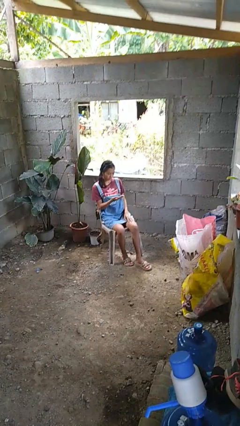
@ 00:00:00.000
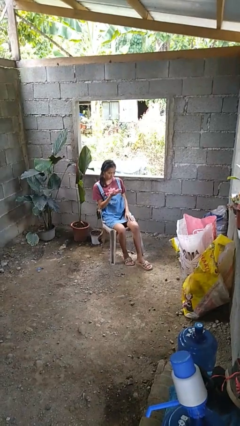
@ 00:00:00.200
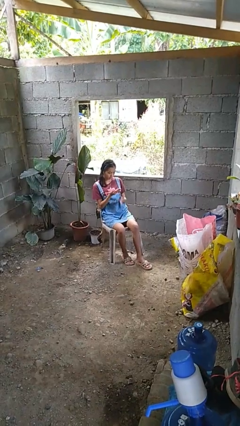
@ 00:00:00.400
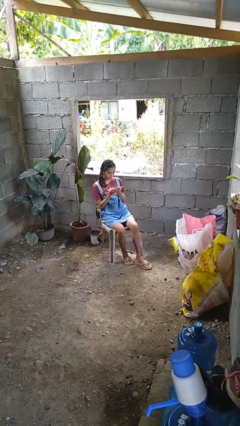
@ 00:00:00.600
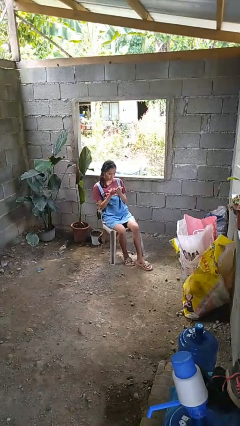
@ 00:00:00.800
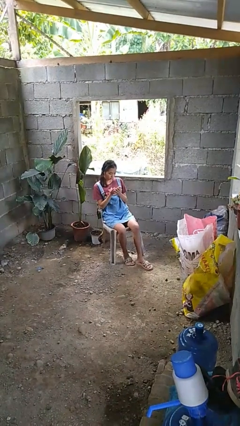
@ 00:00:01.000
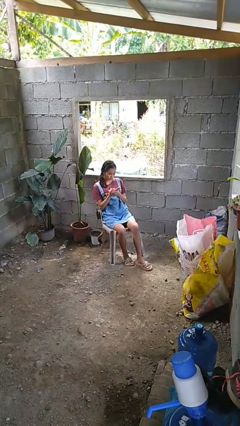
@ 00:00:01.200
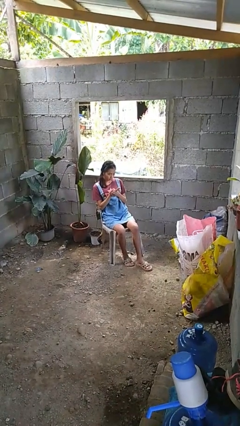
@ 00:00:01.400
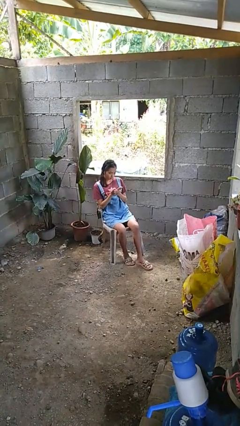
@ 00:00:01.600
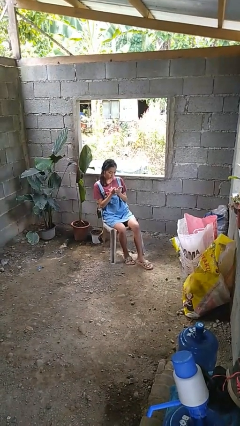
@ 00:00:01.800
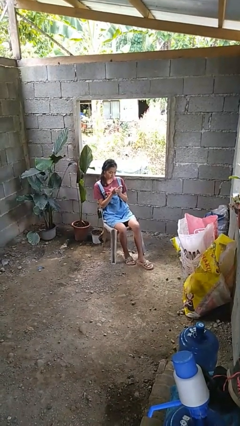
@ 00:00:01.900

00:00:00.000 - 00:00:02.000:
person looks at hands in lap

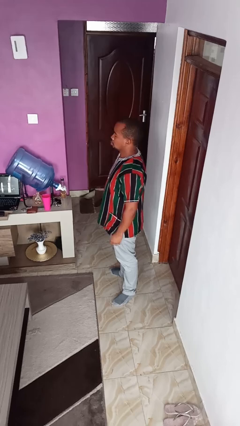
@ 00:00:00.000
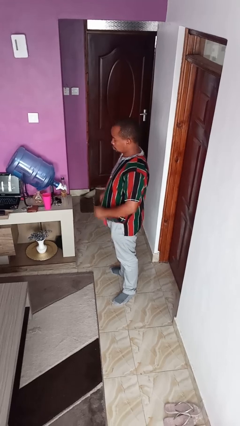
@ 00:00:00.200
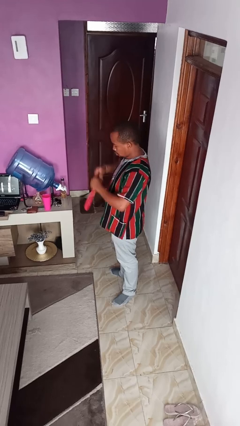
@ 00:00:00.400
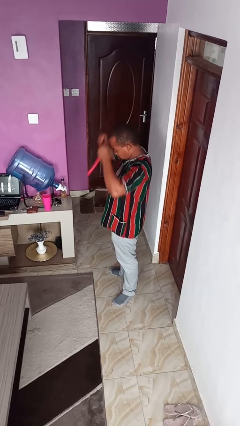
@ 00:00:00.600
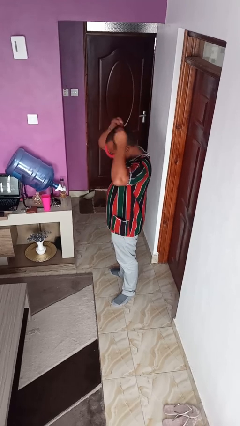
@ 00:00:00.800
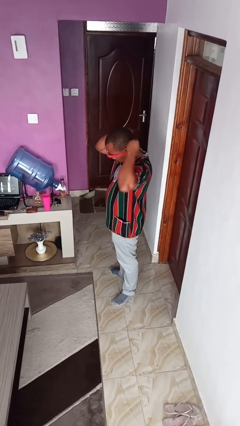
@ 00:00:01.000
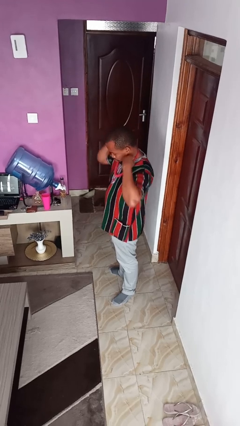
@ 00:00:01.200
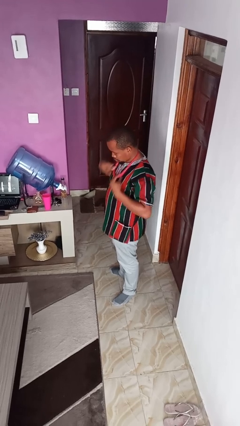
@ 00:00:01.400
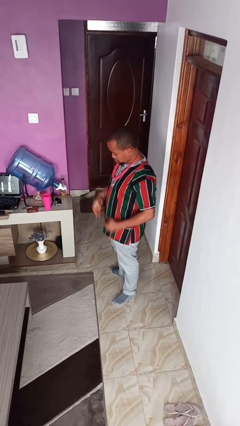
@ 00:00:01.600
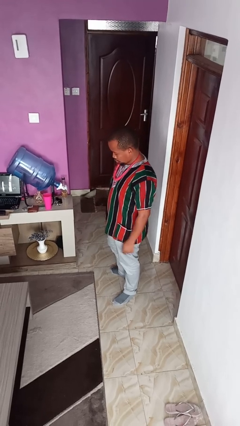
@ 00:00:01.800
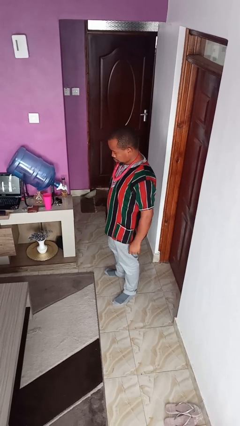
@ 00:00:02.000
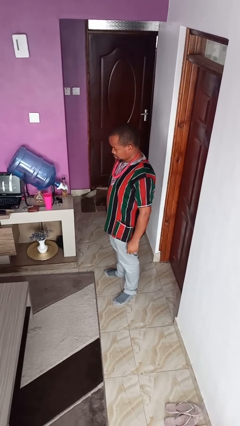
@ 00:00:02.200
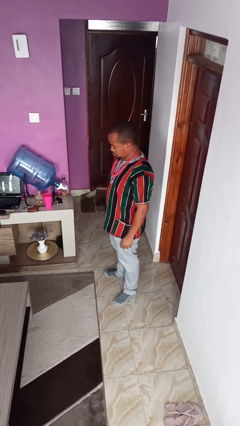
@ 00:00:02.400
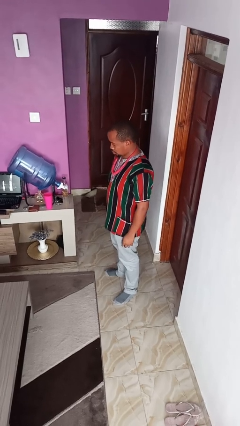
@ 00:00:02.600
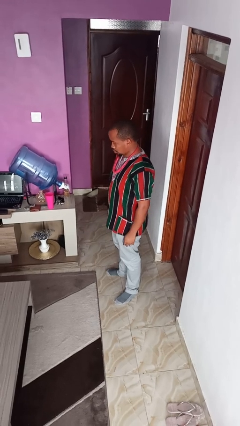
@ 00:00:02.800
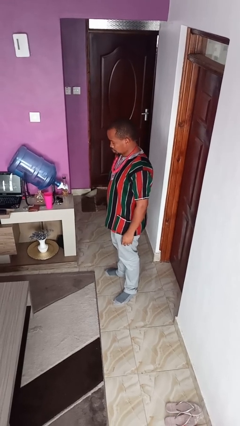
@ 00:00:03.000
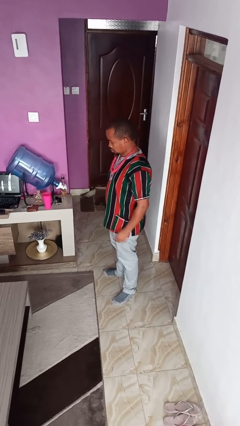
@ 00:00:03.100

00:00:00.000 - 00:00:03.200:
person puts on necklace

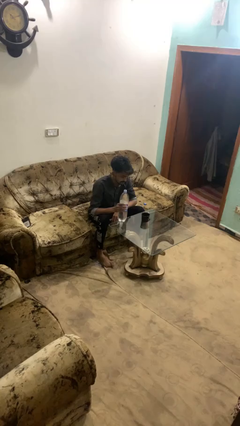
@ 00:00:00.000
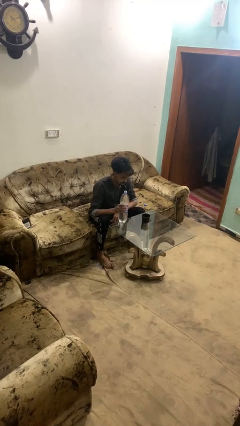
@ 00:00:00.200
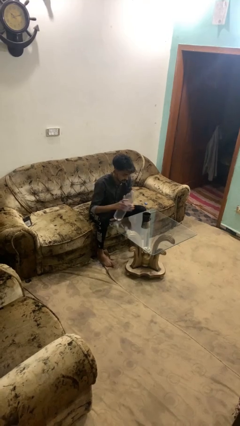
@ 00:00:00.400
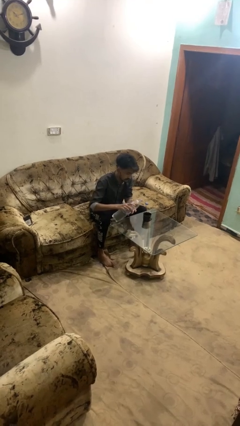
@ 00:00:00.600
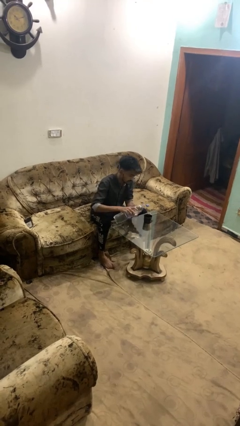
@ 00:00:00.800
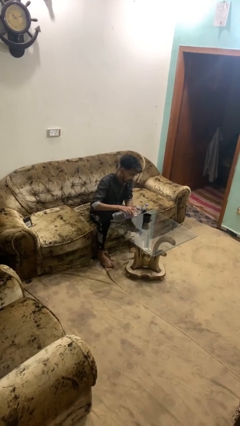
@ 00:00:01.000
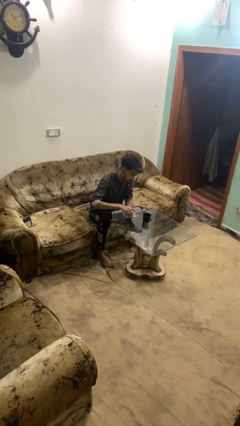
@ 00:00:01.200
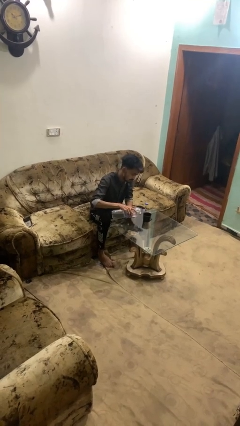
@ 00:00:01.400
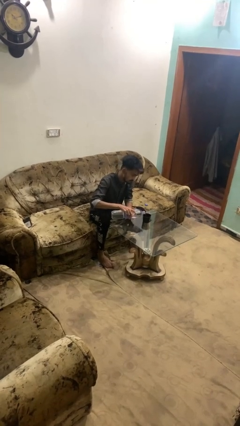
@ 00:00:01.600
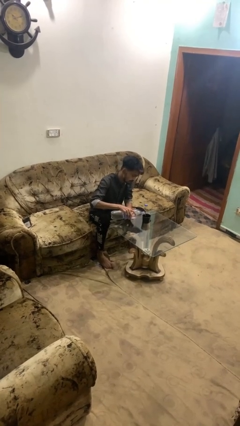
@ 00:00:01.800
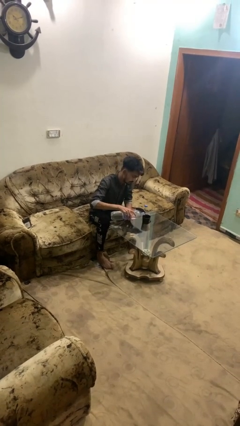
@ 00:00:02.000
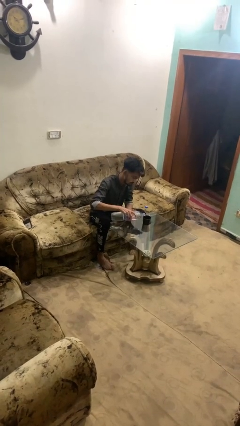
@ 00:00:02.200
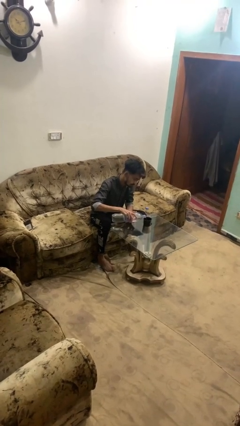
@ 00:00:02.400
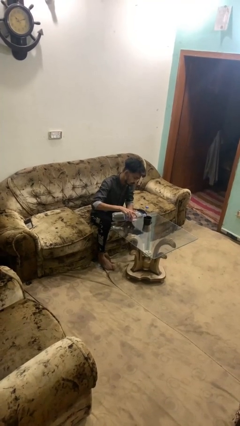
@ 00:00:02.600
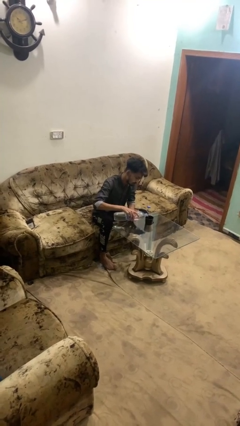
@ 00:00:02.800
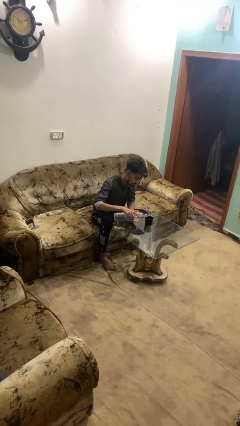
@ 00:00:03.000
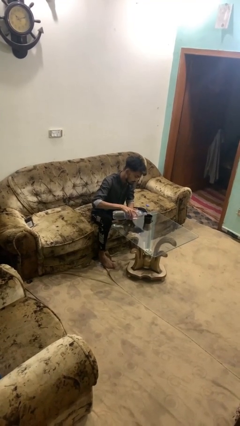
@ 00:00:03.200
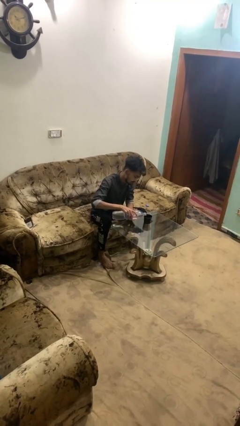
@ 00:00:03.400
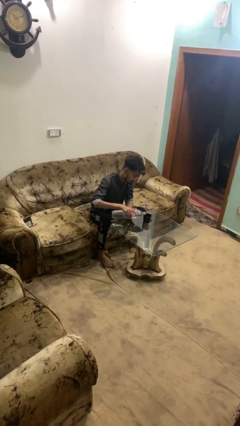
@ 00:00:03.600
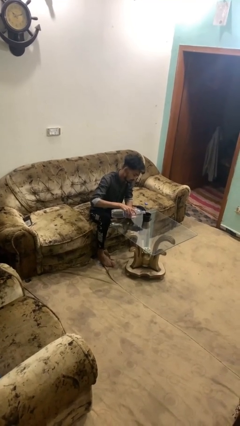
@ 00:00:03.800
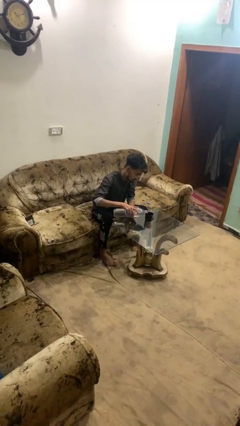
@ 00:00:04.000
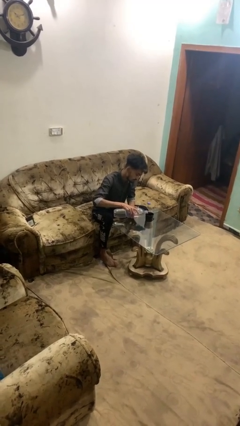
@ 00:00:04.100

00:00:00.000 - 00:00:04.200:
person pours liquid into cup

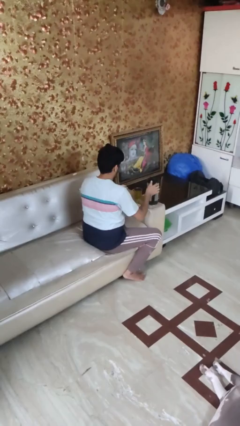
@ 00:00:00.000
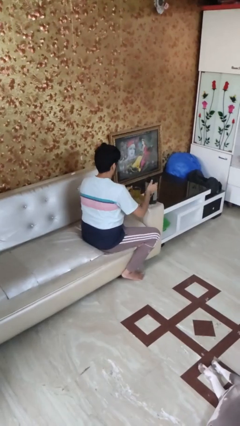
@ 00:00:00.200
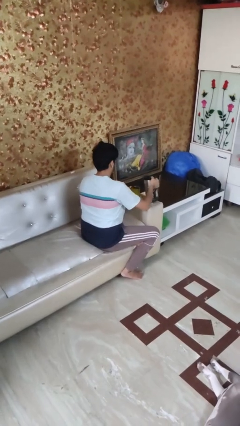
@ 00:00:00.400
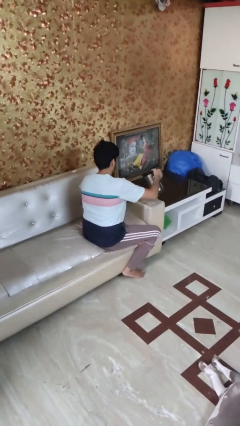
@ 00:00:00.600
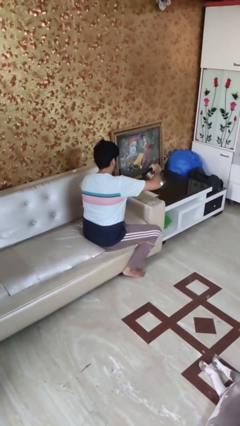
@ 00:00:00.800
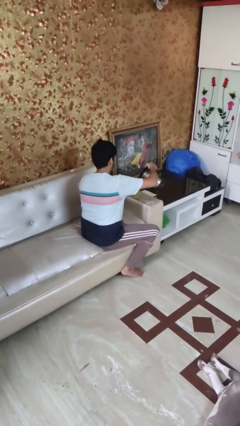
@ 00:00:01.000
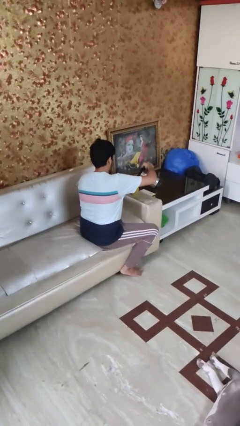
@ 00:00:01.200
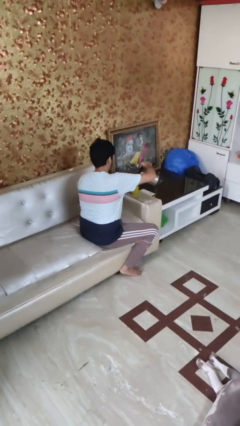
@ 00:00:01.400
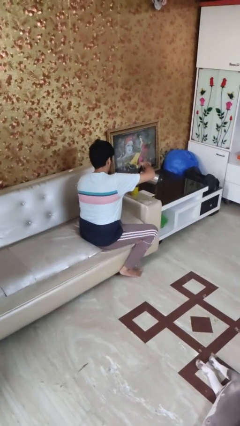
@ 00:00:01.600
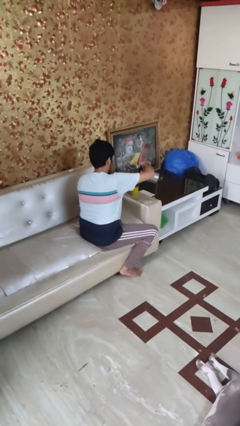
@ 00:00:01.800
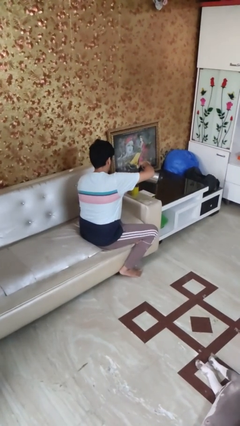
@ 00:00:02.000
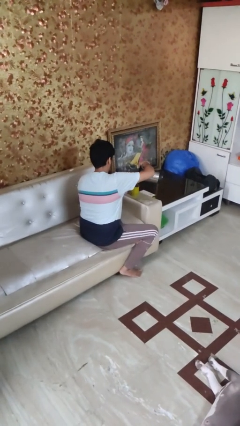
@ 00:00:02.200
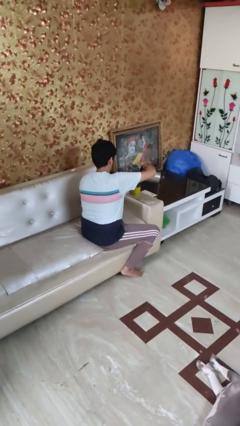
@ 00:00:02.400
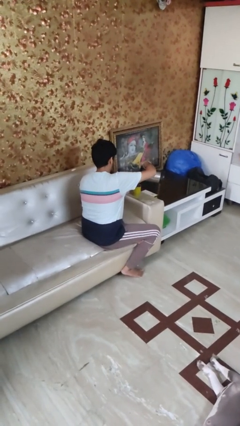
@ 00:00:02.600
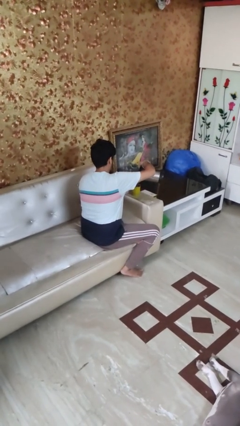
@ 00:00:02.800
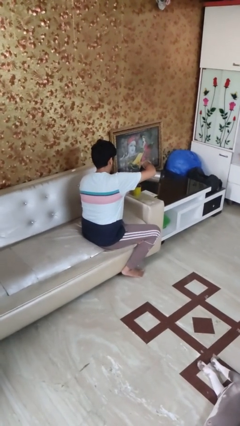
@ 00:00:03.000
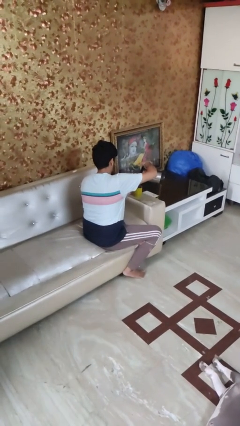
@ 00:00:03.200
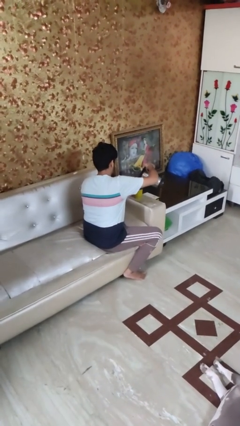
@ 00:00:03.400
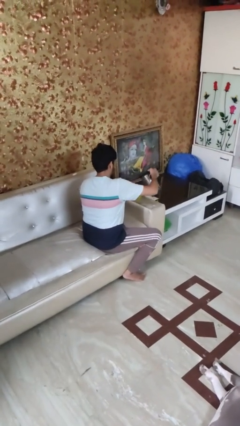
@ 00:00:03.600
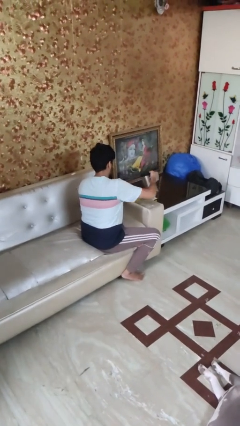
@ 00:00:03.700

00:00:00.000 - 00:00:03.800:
person pours coffee into mug

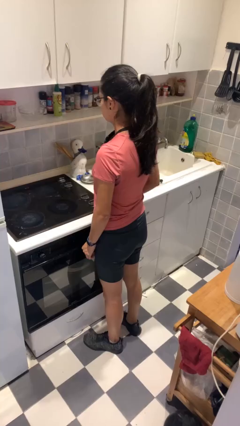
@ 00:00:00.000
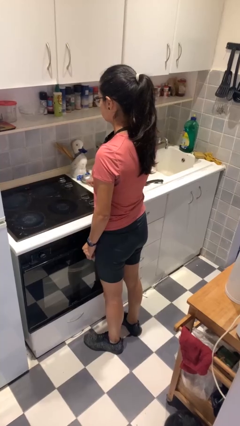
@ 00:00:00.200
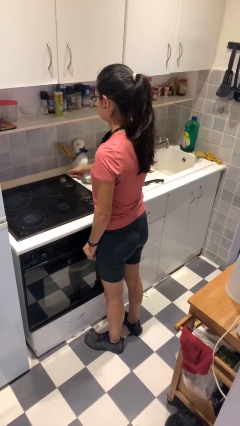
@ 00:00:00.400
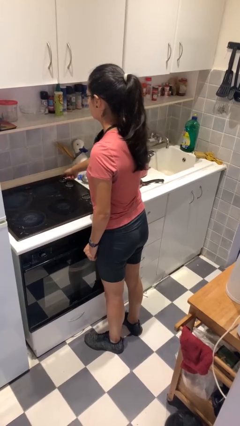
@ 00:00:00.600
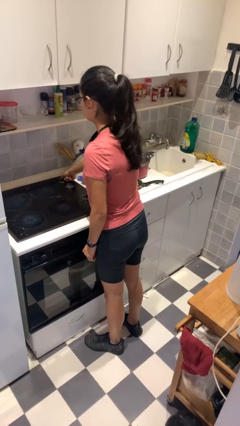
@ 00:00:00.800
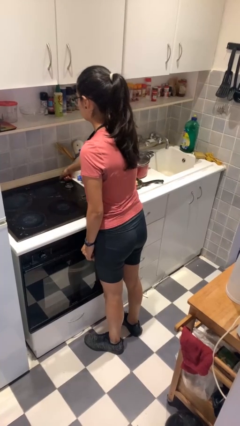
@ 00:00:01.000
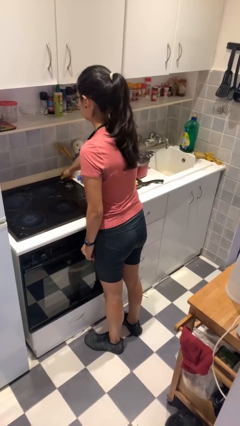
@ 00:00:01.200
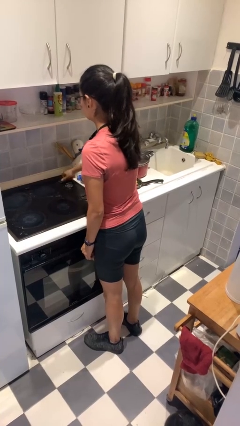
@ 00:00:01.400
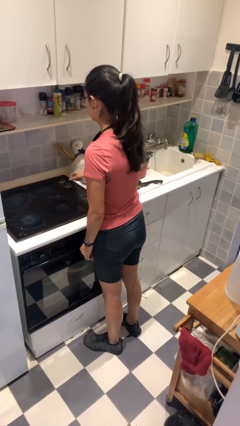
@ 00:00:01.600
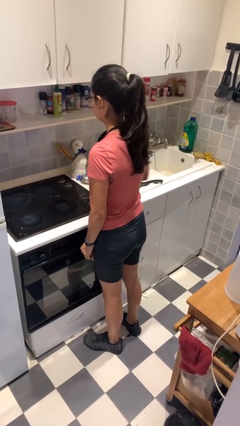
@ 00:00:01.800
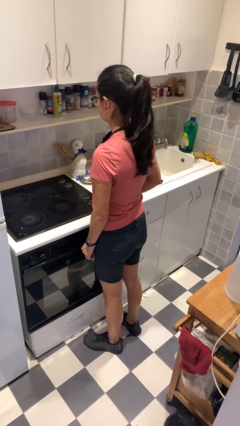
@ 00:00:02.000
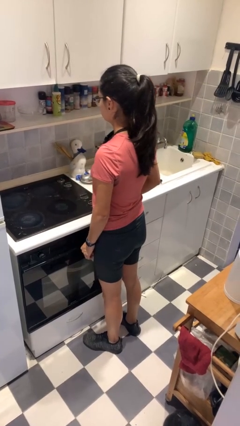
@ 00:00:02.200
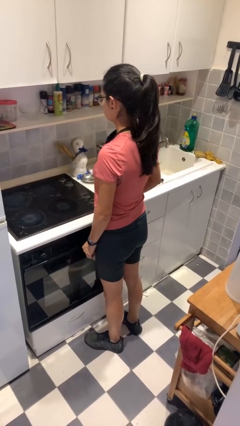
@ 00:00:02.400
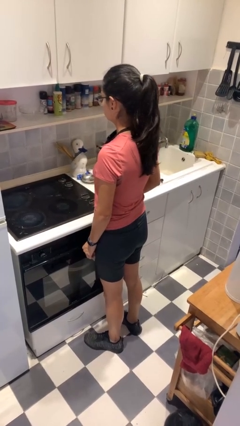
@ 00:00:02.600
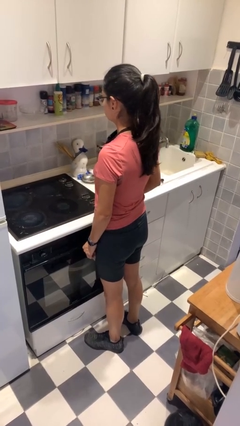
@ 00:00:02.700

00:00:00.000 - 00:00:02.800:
person turns on stovetop

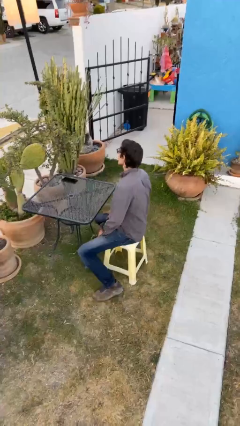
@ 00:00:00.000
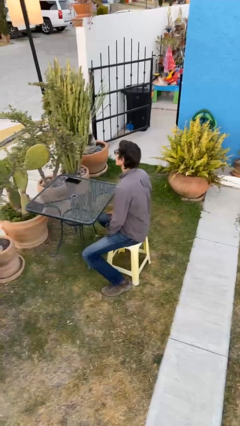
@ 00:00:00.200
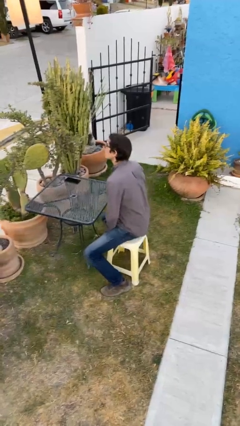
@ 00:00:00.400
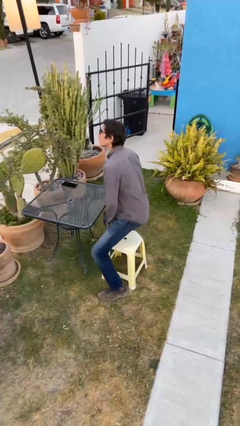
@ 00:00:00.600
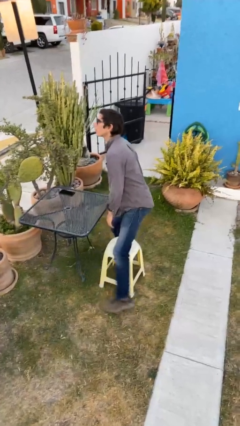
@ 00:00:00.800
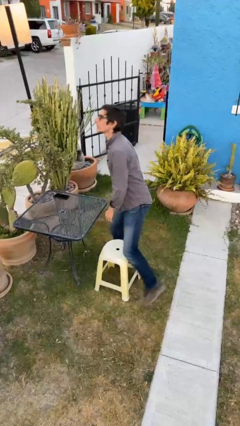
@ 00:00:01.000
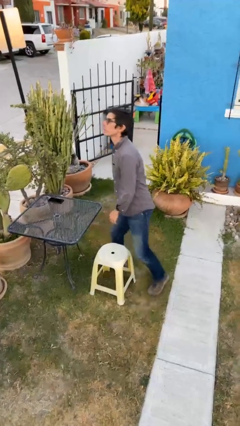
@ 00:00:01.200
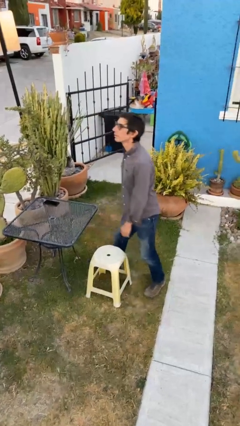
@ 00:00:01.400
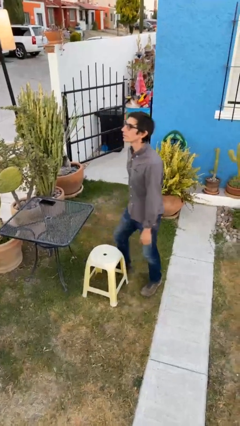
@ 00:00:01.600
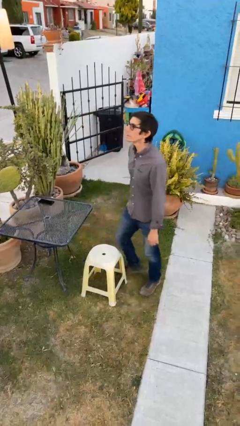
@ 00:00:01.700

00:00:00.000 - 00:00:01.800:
person stands up
